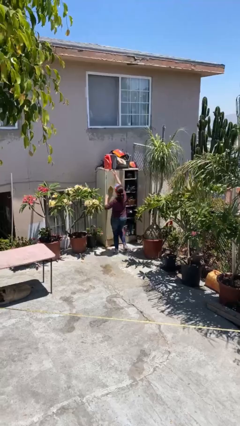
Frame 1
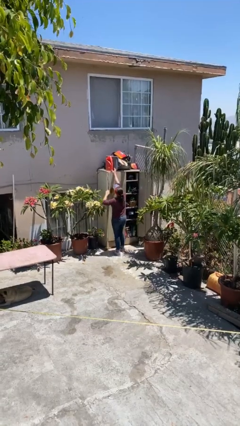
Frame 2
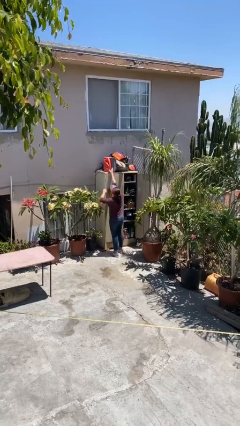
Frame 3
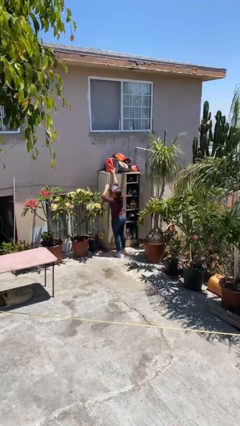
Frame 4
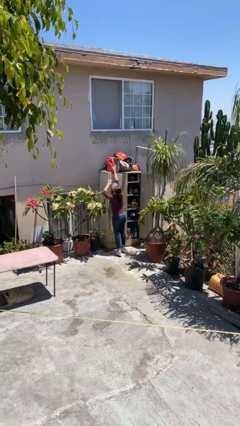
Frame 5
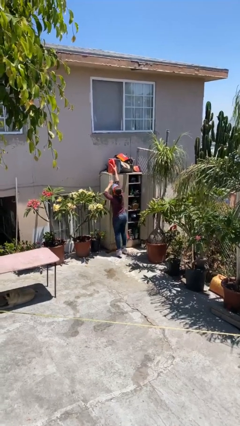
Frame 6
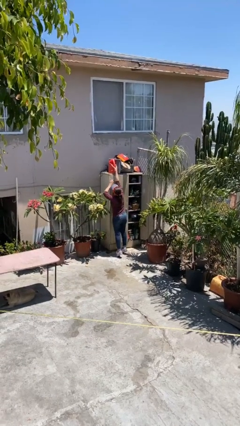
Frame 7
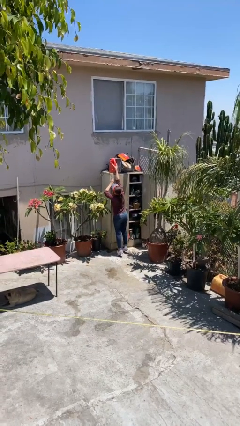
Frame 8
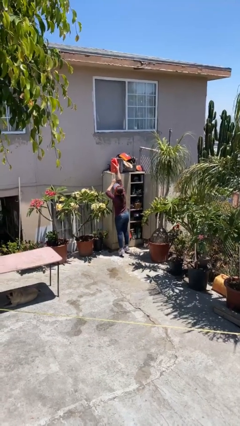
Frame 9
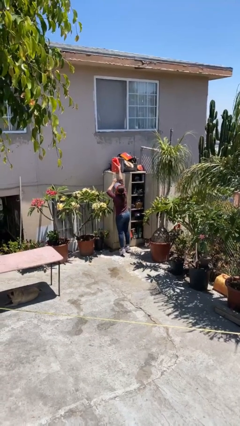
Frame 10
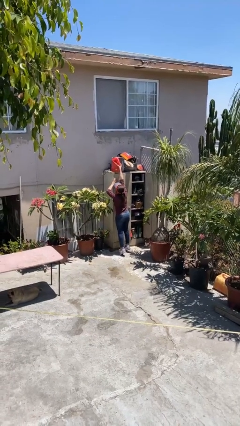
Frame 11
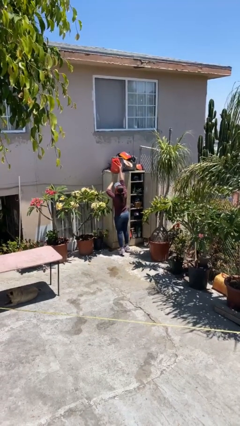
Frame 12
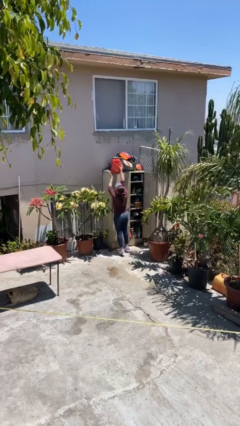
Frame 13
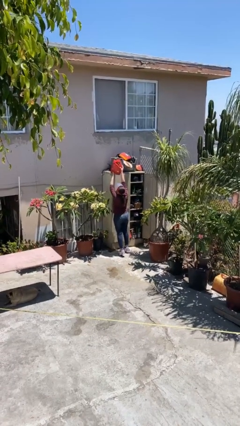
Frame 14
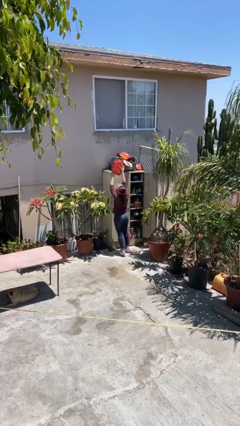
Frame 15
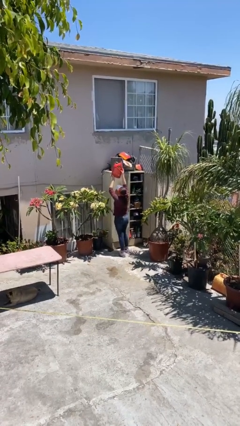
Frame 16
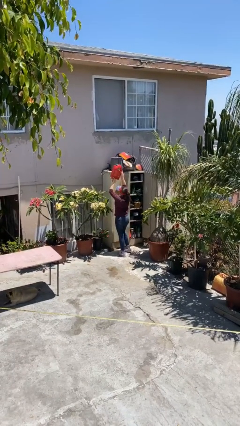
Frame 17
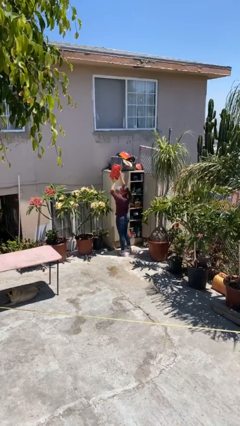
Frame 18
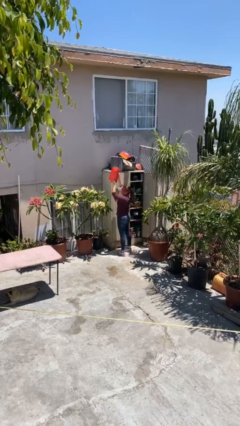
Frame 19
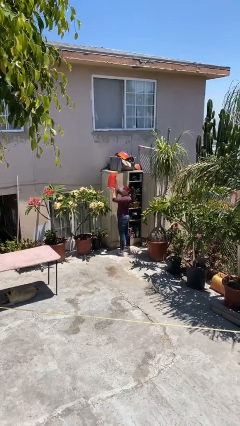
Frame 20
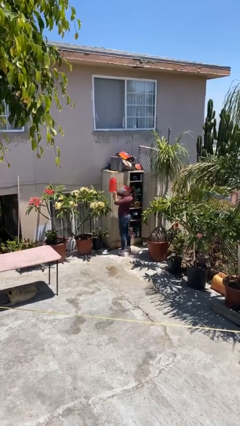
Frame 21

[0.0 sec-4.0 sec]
person picks up object from shelf

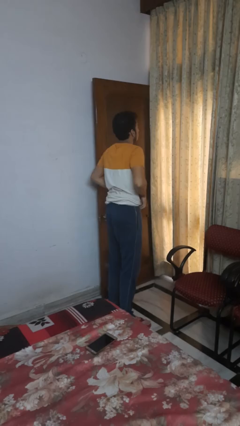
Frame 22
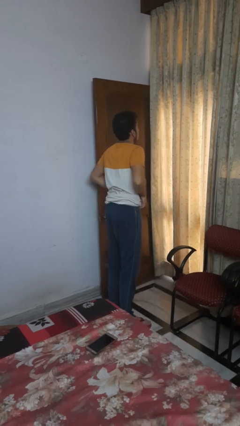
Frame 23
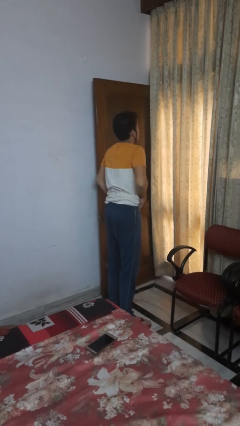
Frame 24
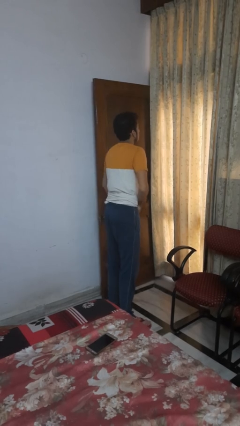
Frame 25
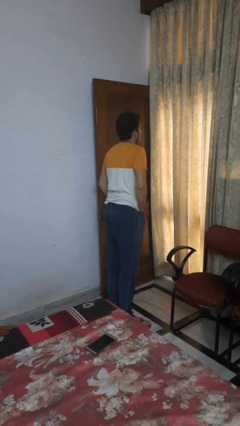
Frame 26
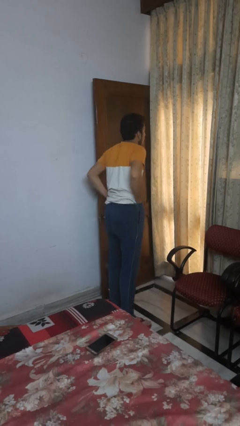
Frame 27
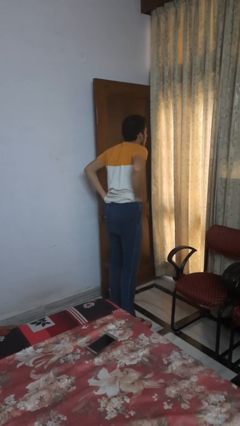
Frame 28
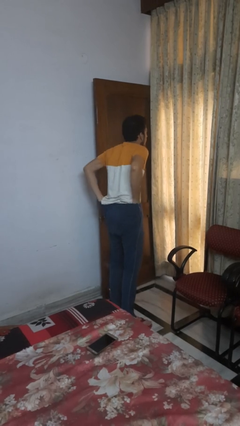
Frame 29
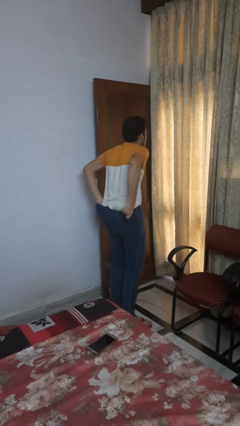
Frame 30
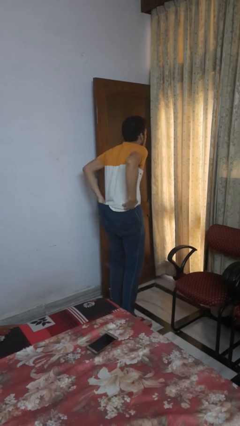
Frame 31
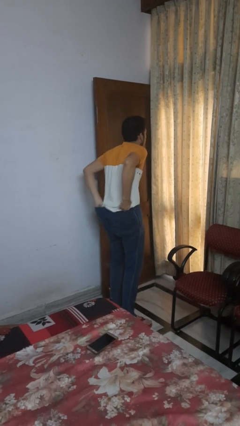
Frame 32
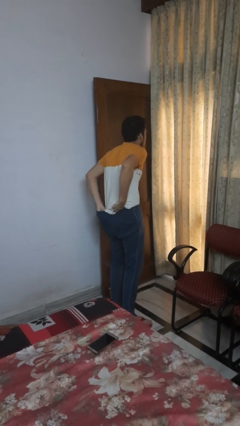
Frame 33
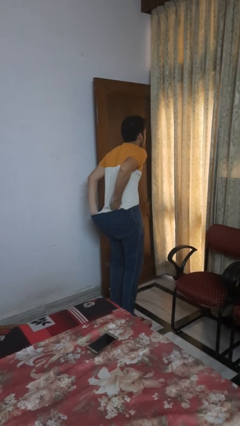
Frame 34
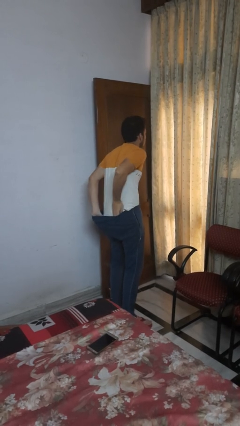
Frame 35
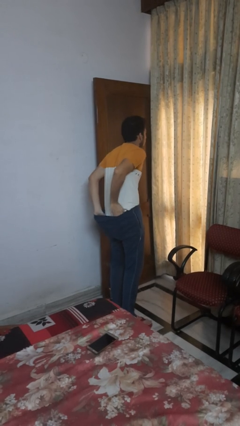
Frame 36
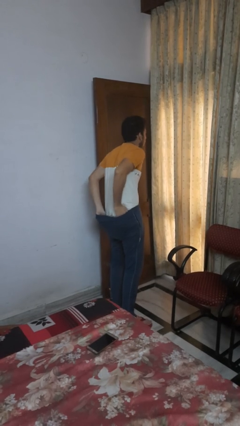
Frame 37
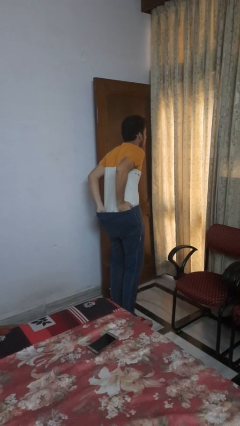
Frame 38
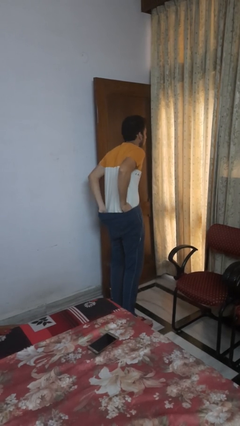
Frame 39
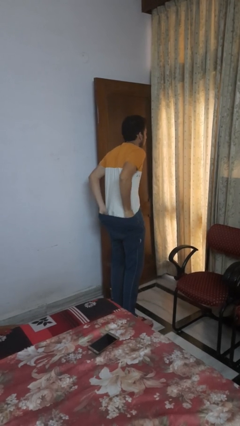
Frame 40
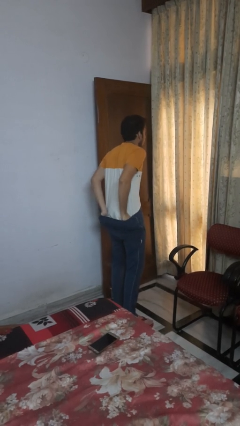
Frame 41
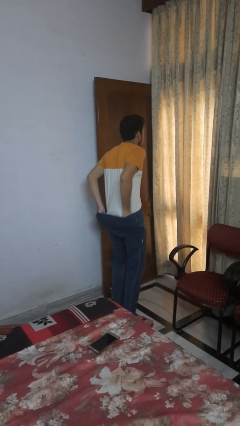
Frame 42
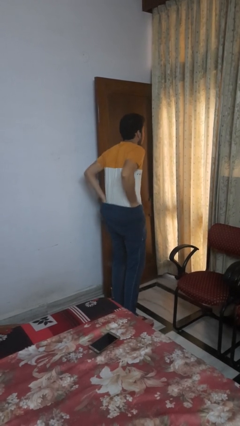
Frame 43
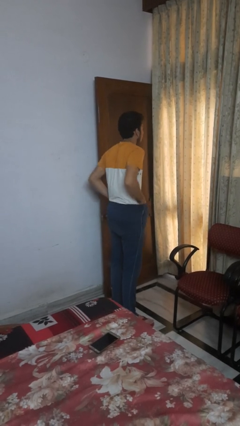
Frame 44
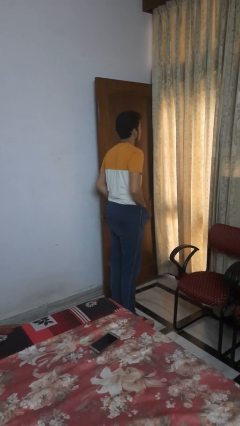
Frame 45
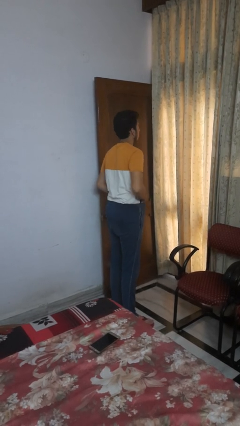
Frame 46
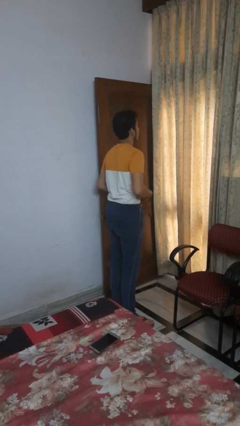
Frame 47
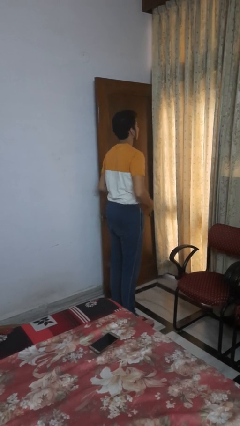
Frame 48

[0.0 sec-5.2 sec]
person tucks in shirt

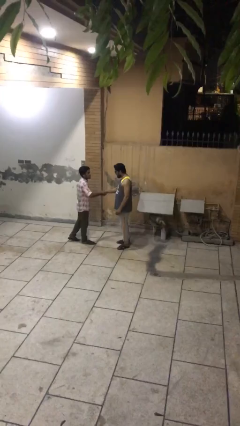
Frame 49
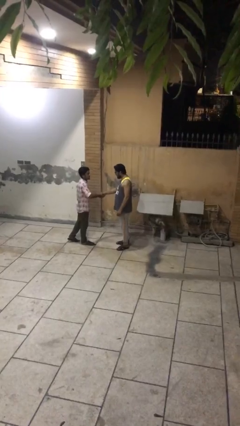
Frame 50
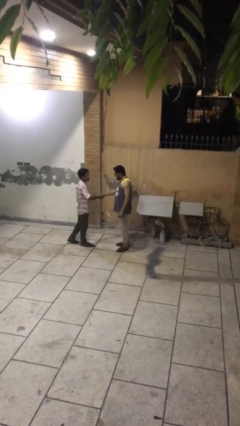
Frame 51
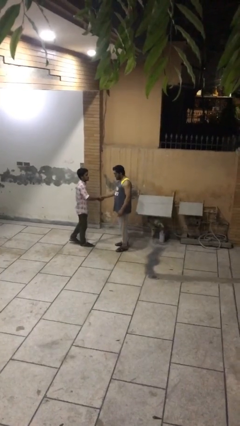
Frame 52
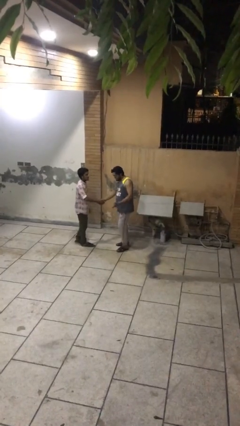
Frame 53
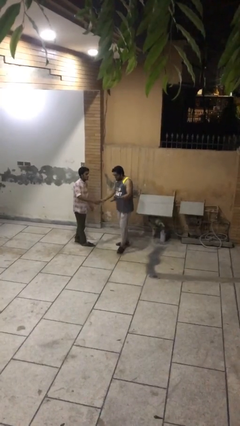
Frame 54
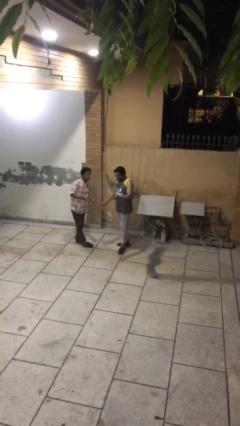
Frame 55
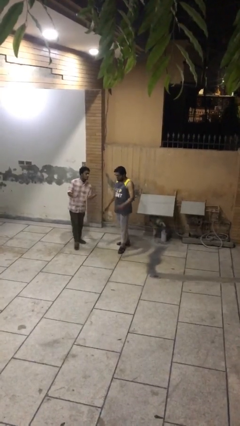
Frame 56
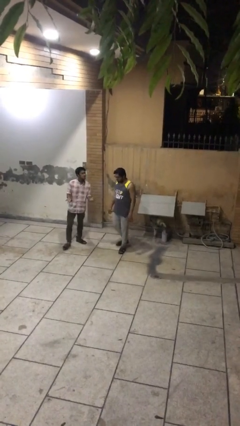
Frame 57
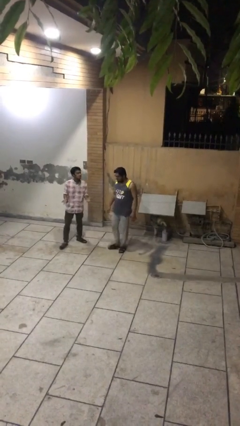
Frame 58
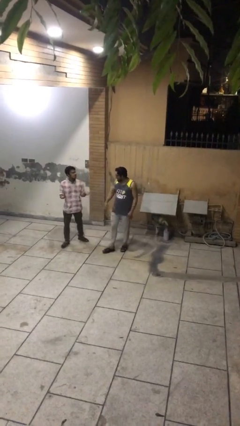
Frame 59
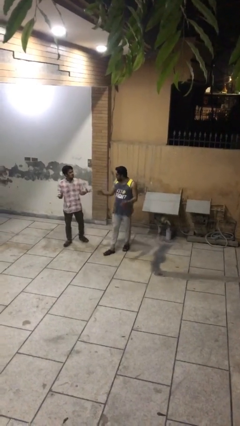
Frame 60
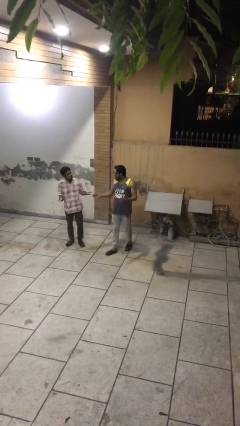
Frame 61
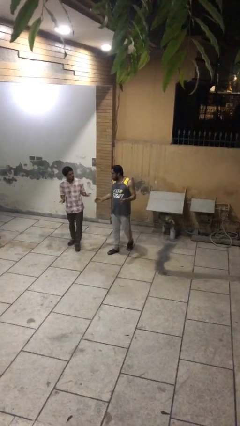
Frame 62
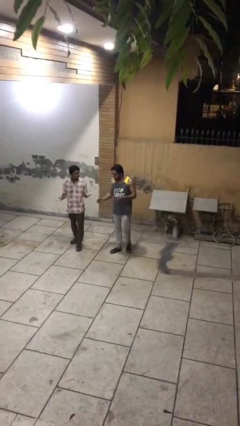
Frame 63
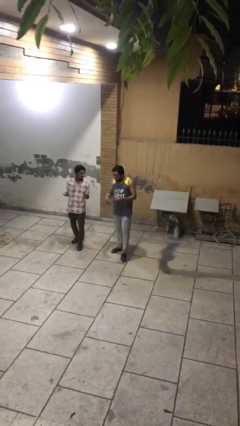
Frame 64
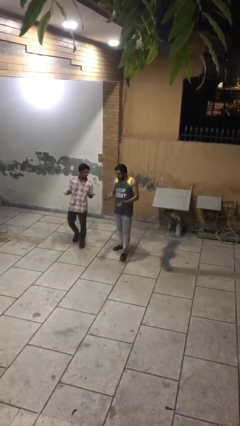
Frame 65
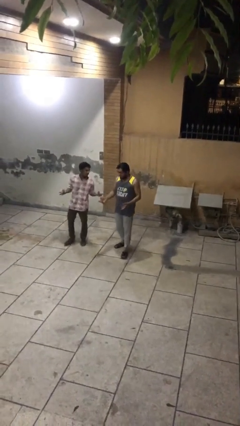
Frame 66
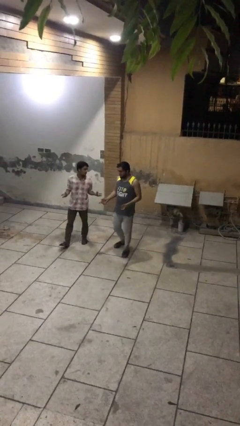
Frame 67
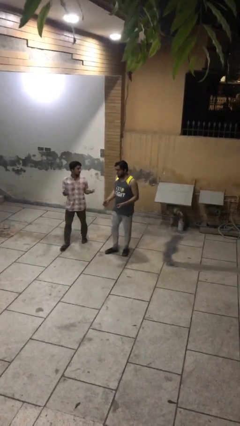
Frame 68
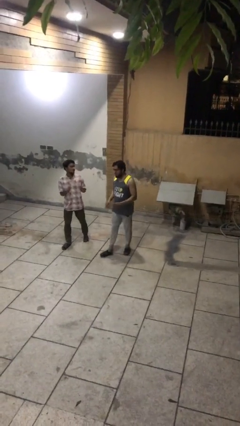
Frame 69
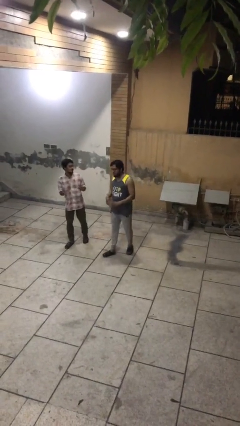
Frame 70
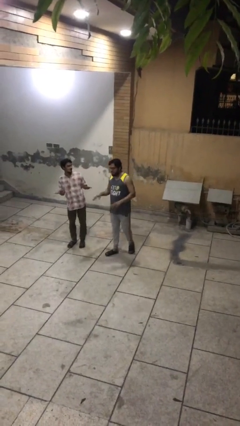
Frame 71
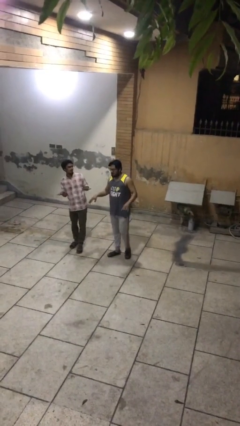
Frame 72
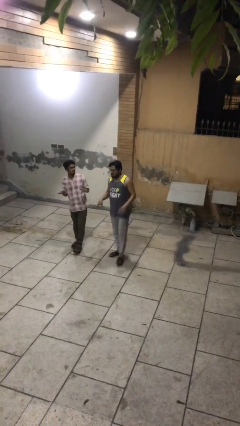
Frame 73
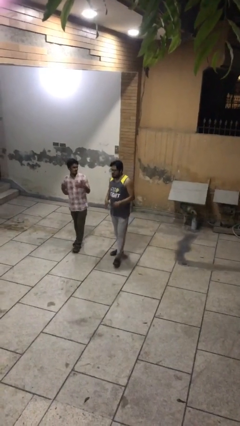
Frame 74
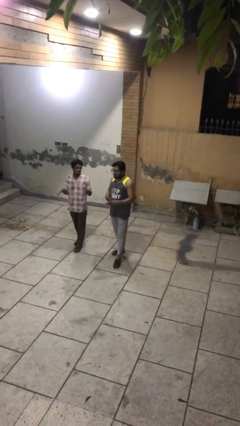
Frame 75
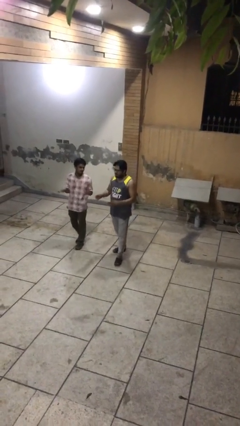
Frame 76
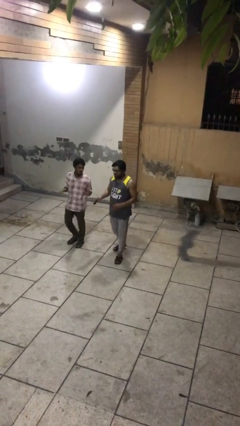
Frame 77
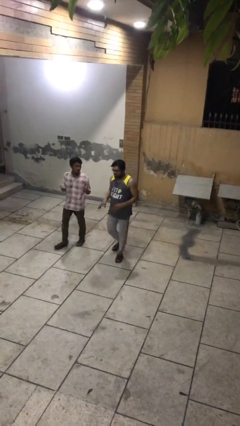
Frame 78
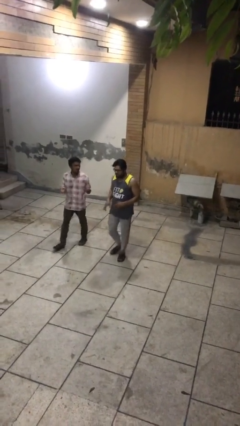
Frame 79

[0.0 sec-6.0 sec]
person talks to person

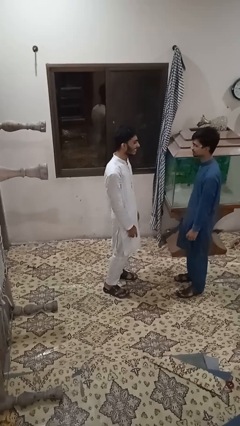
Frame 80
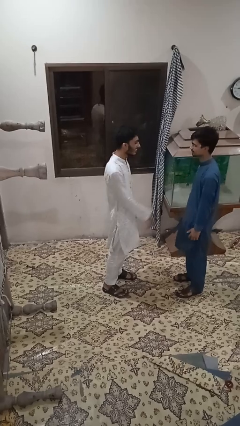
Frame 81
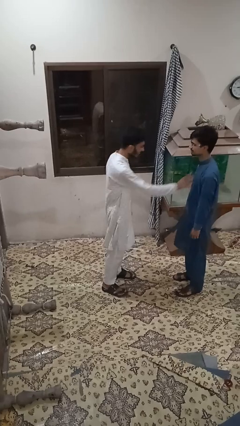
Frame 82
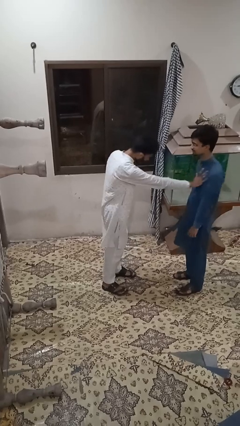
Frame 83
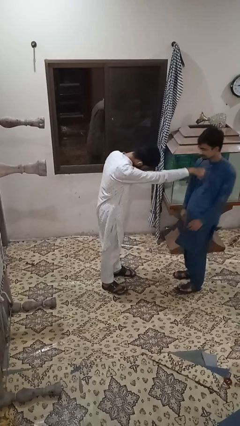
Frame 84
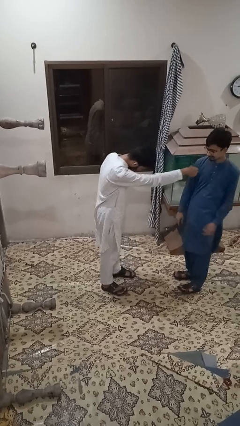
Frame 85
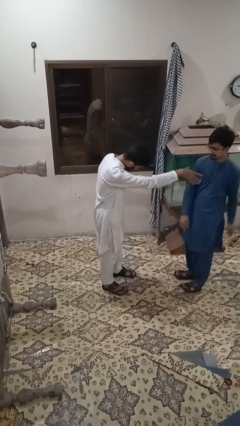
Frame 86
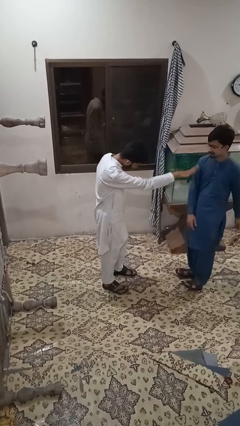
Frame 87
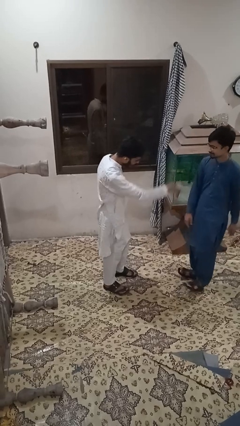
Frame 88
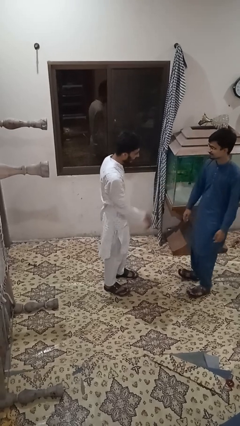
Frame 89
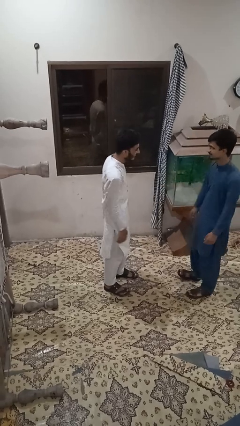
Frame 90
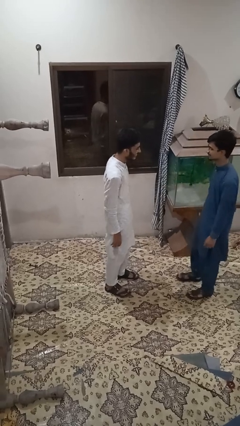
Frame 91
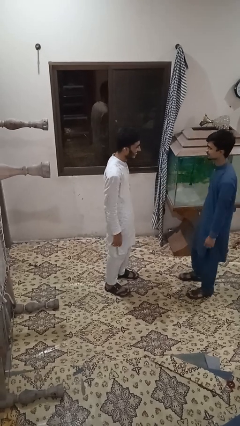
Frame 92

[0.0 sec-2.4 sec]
person shoves person

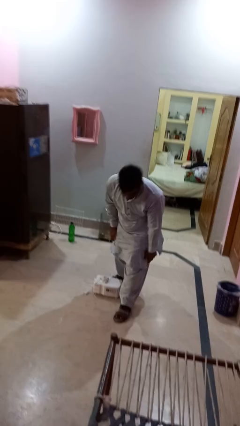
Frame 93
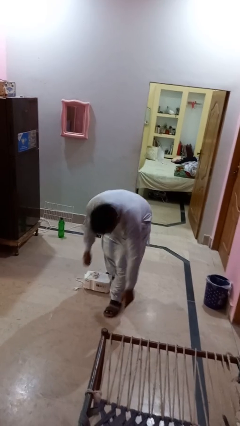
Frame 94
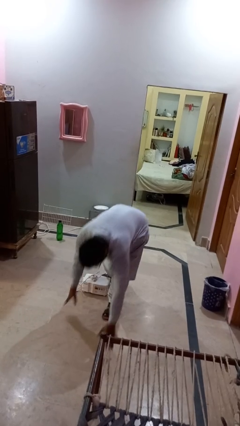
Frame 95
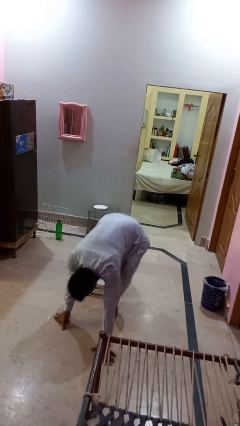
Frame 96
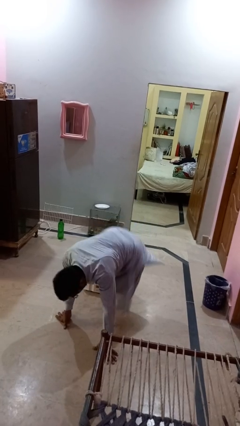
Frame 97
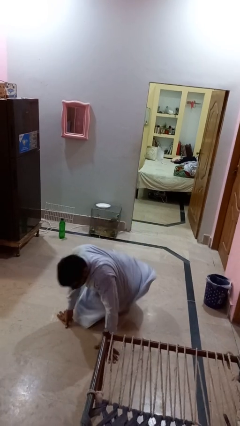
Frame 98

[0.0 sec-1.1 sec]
person trips on object on floor
